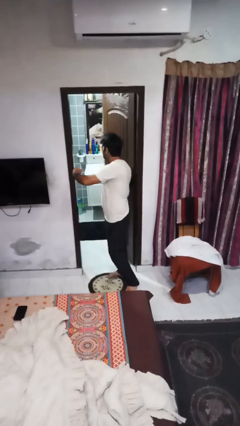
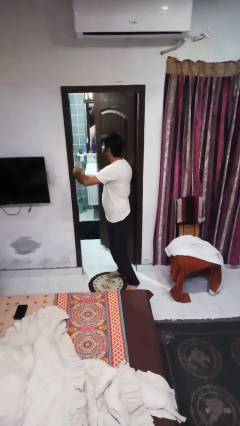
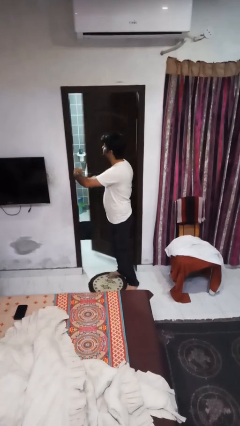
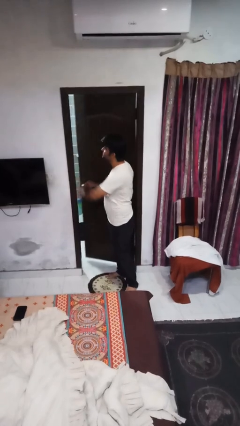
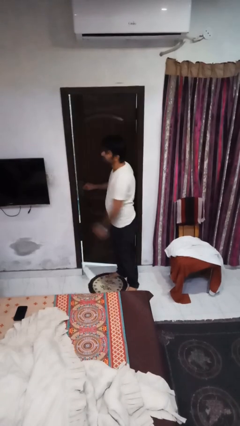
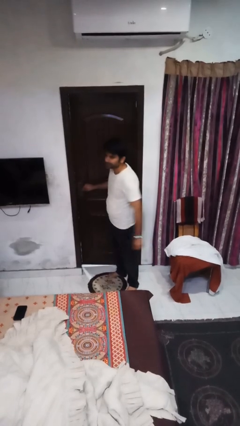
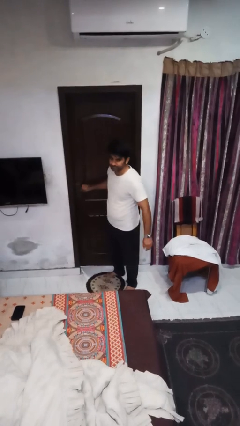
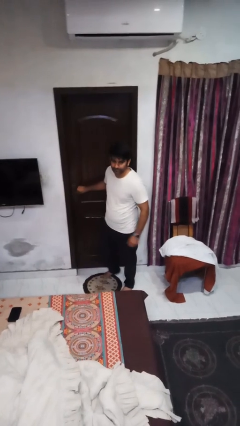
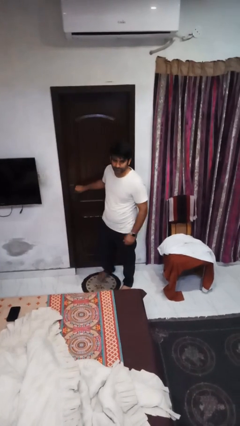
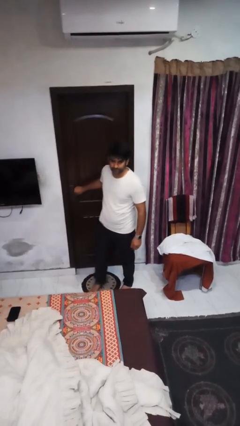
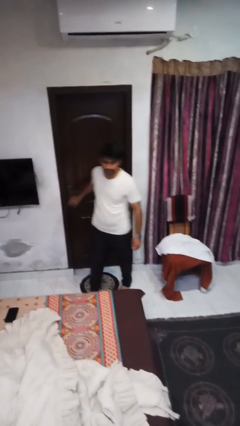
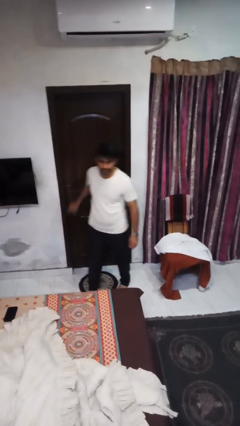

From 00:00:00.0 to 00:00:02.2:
person closes facility door

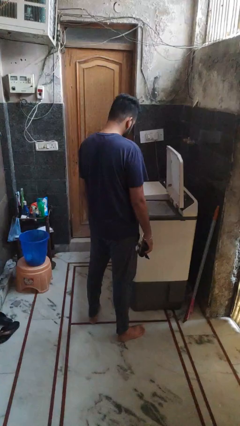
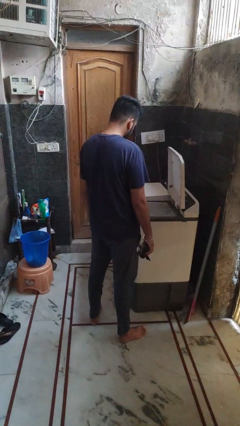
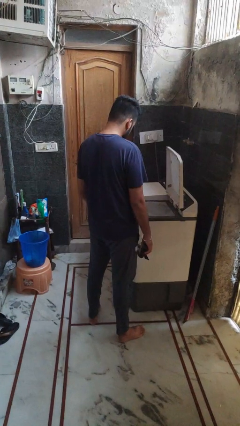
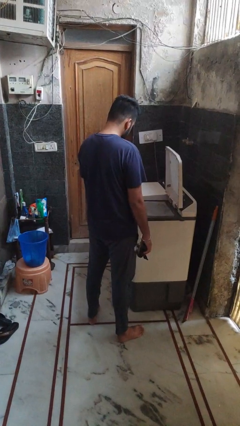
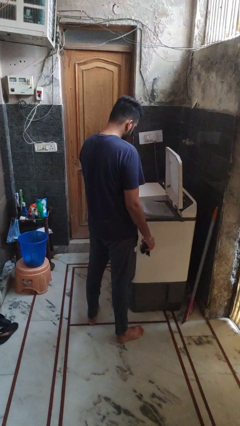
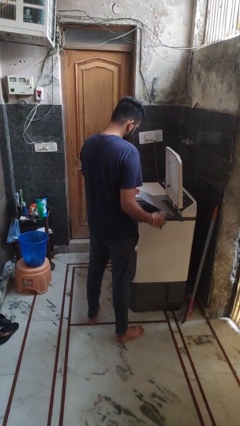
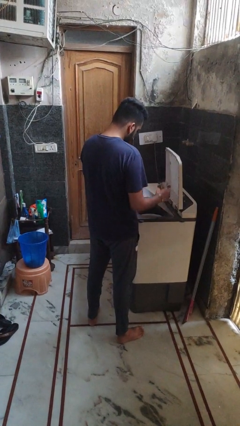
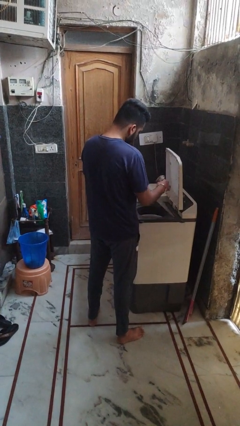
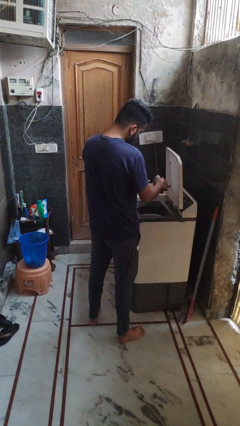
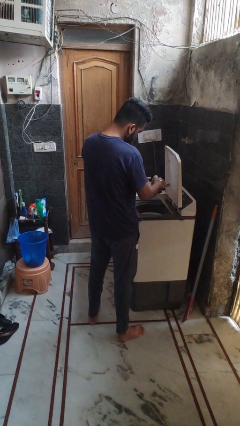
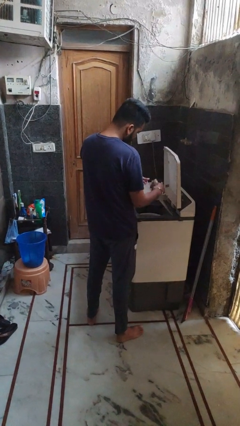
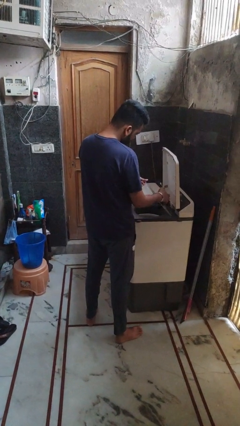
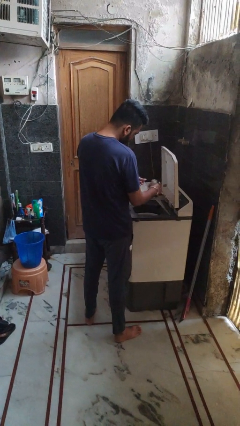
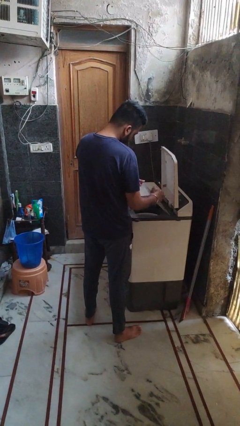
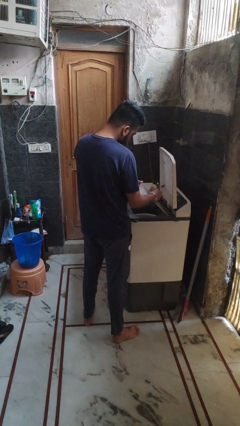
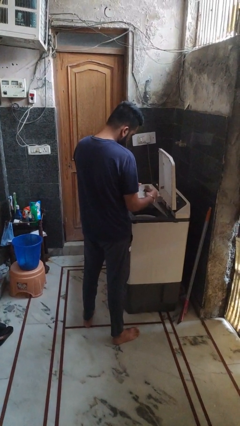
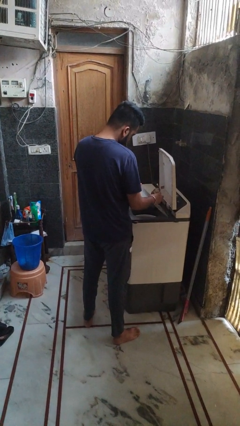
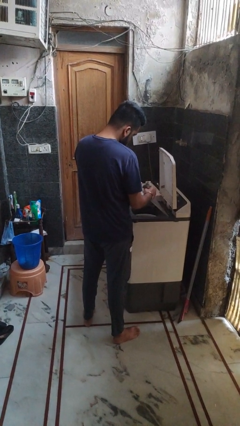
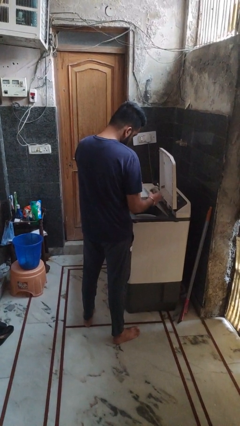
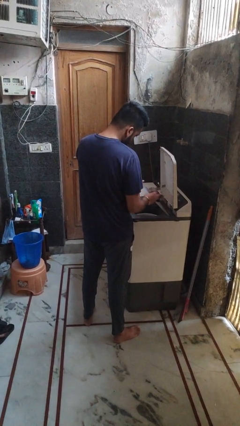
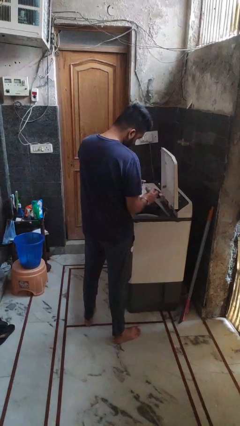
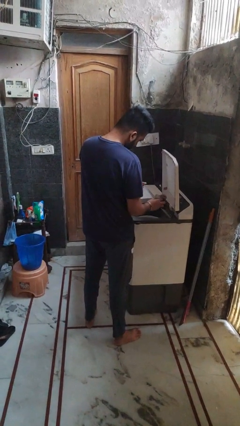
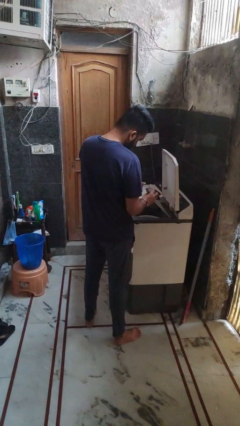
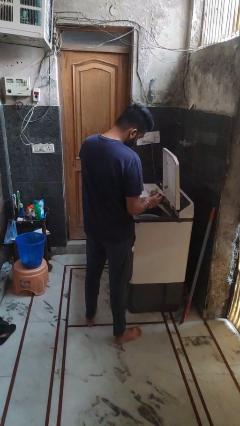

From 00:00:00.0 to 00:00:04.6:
person cleans dryer lint trap

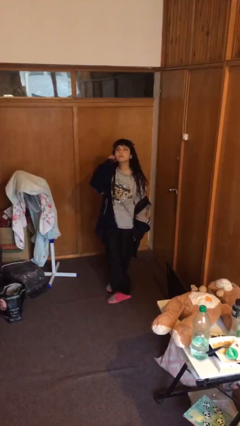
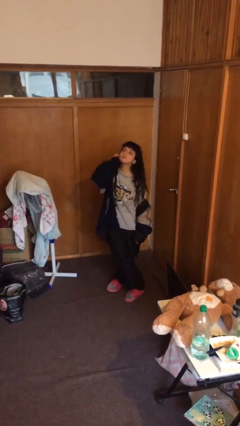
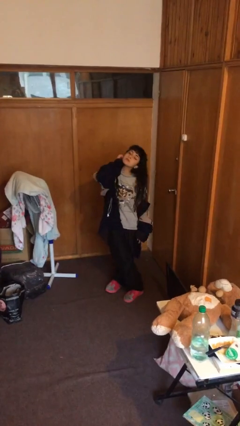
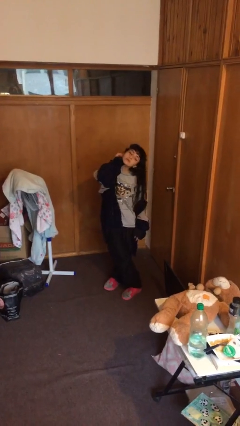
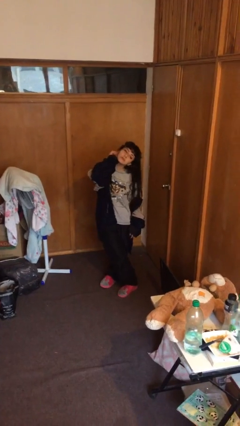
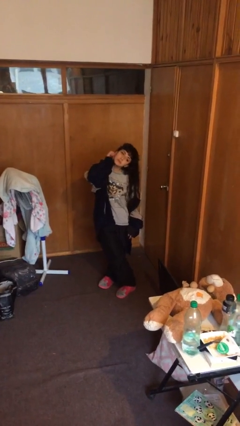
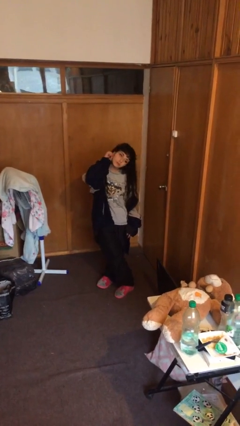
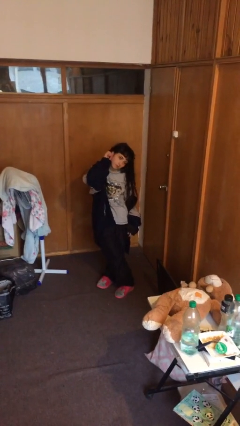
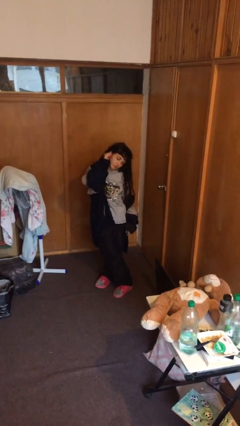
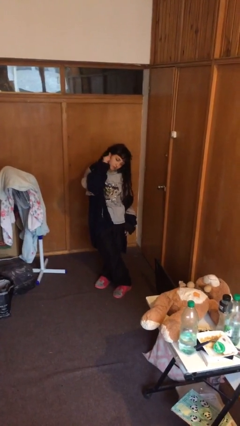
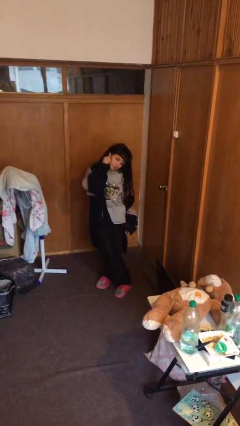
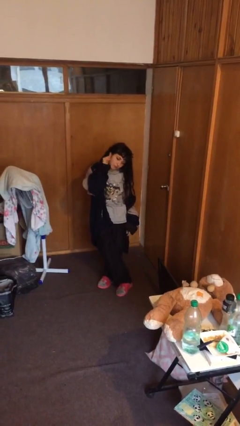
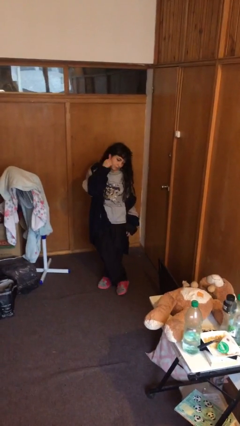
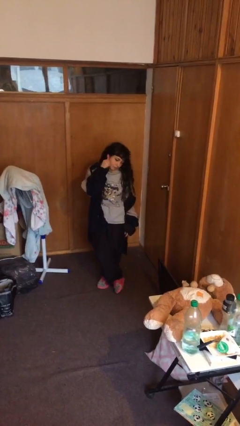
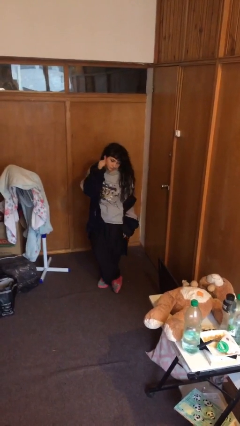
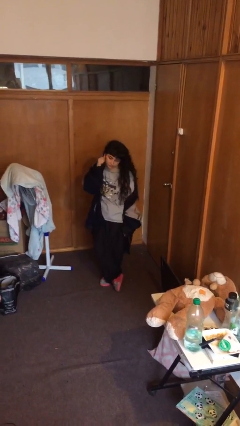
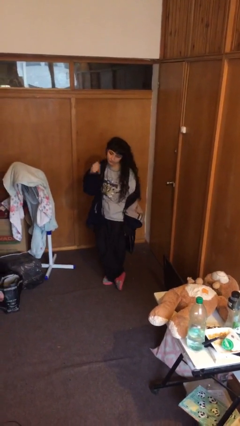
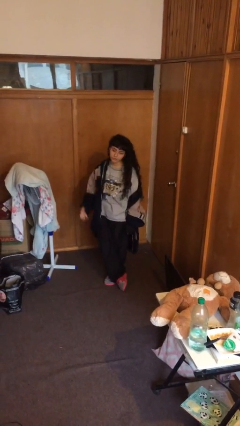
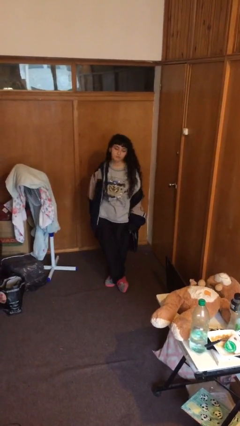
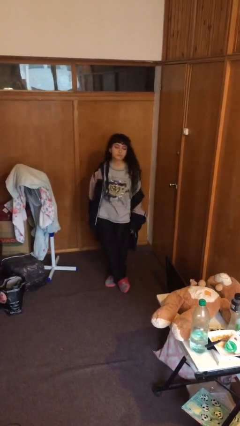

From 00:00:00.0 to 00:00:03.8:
person touches earlobe

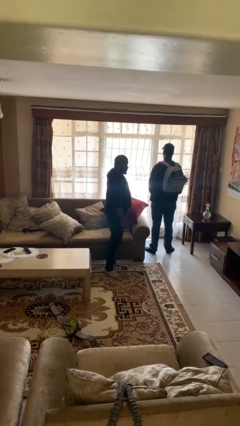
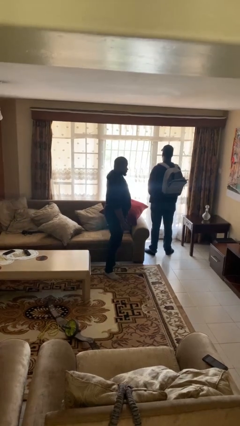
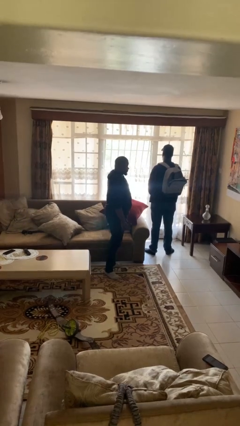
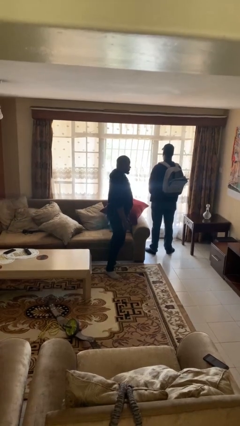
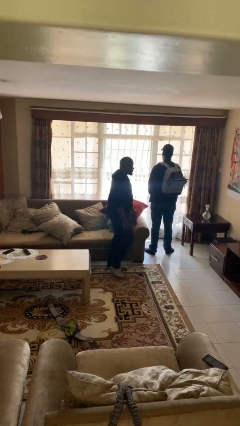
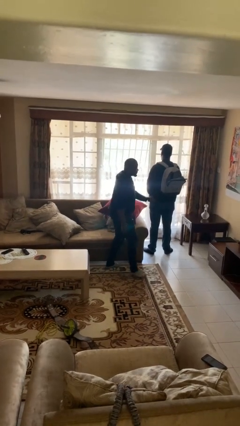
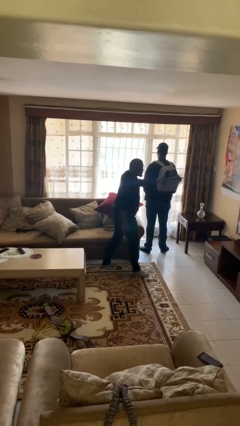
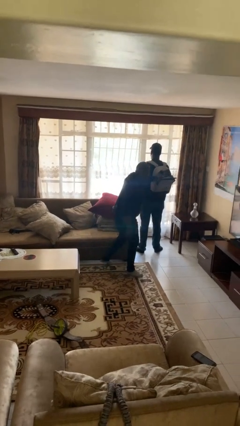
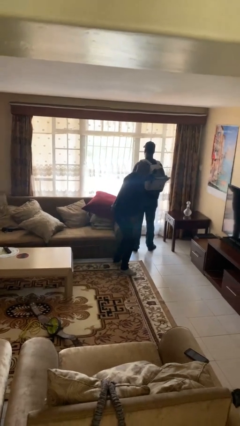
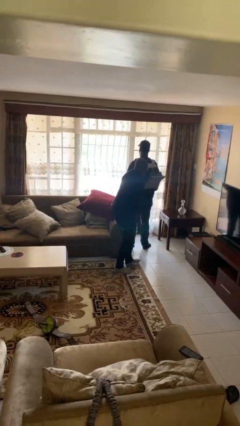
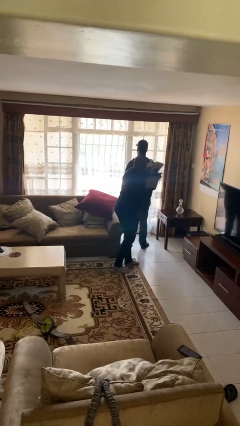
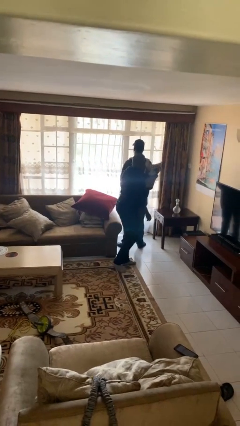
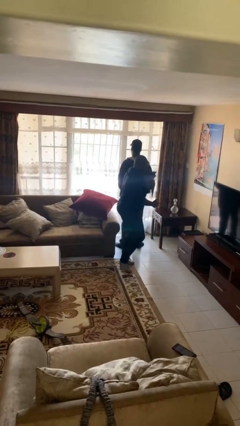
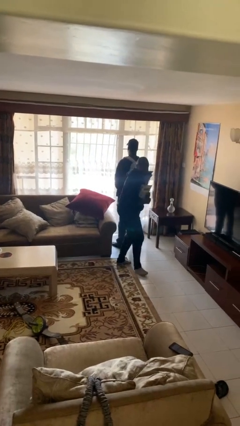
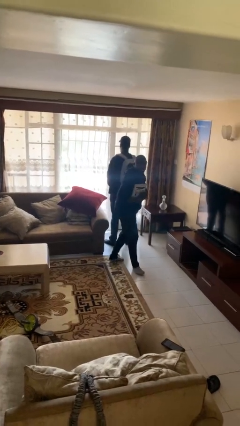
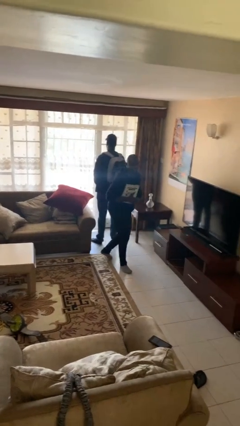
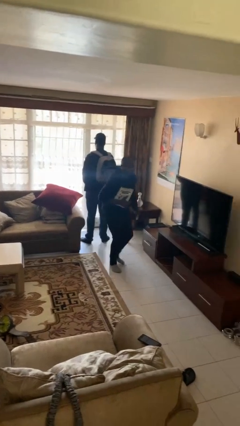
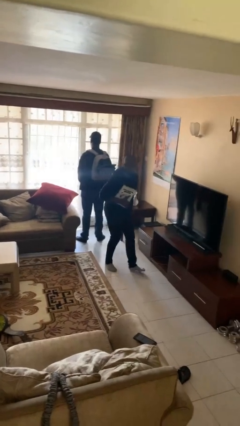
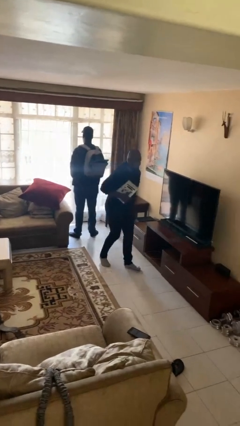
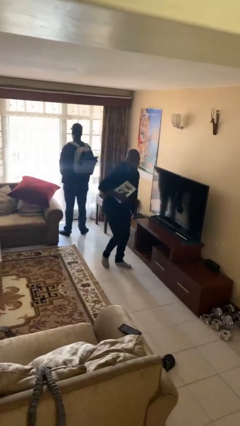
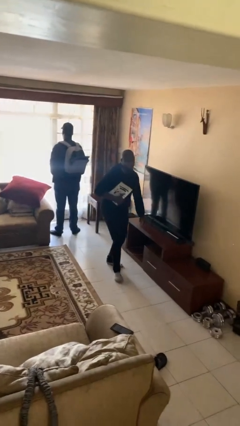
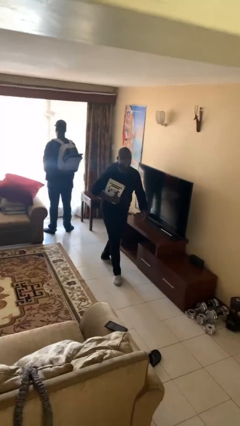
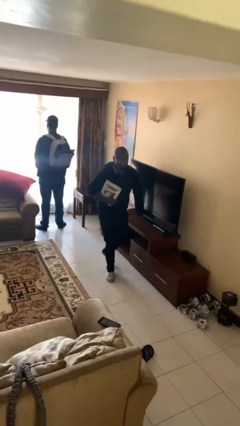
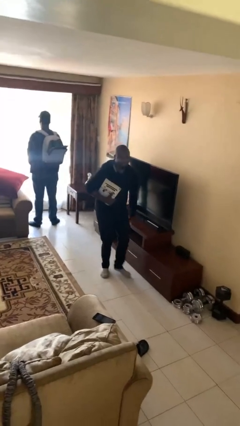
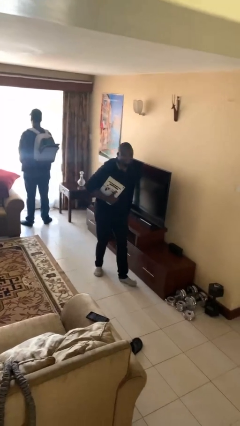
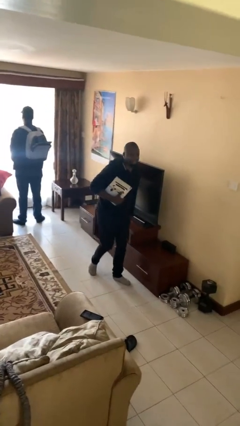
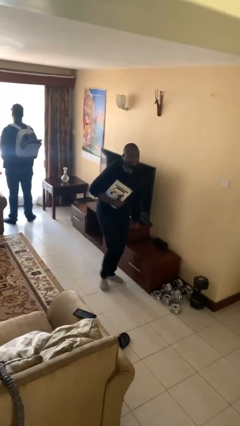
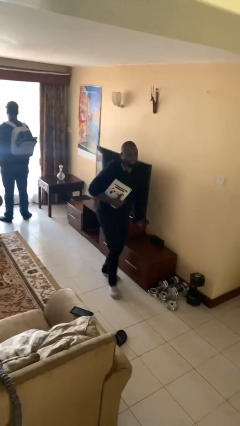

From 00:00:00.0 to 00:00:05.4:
person steals object from person

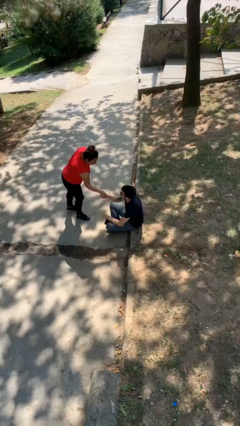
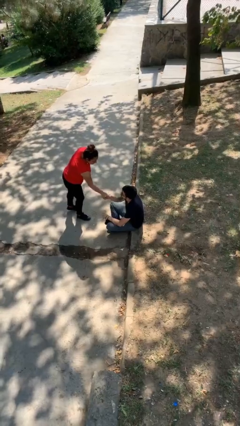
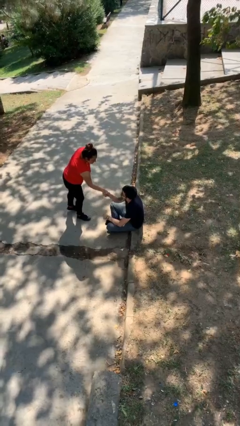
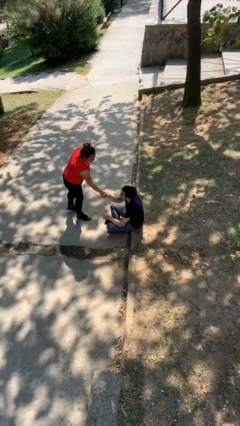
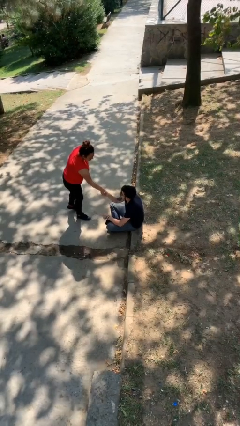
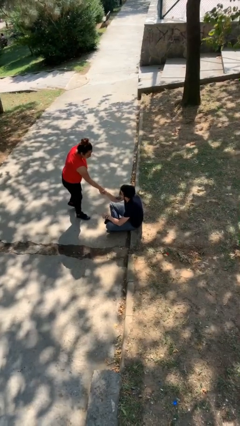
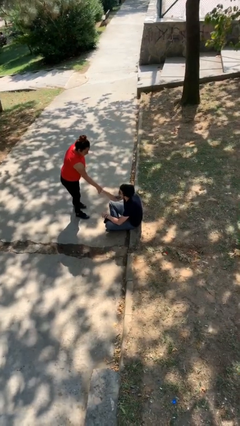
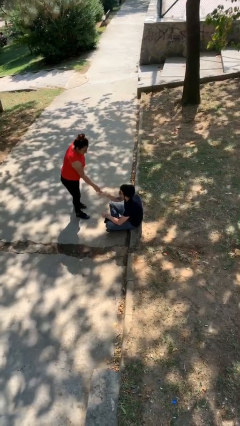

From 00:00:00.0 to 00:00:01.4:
person shakes hand

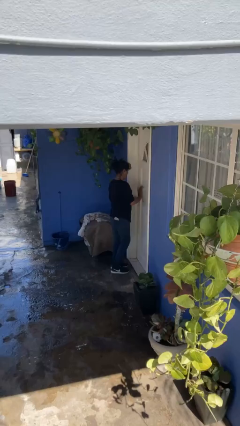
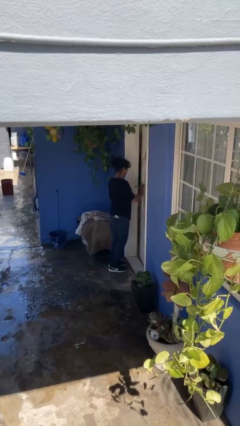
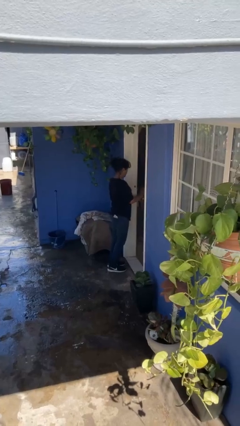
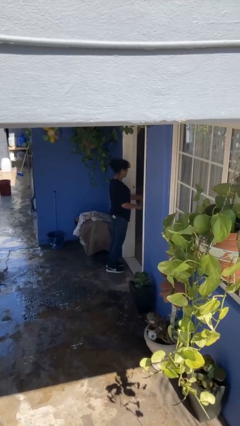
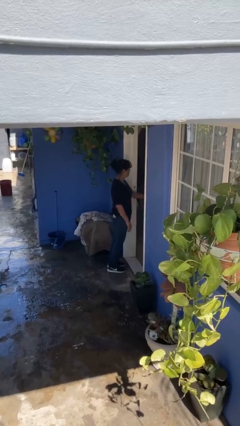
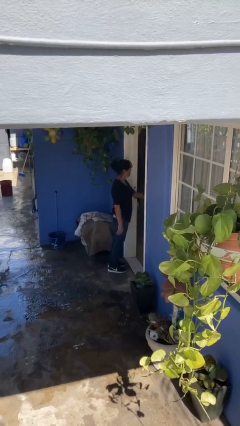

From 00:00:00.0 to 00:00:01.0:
person opens facility door
